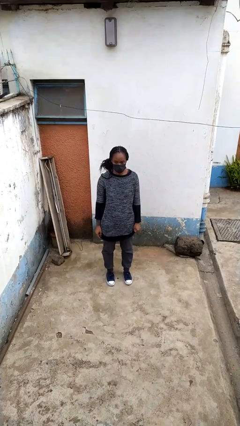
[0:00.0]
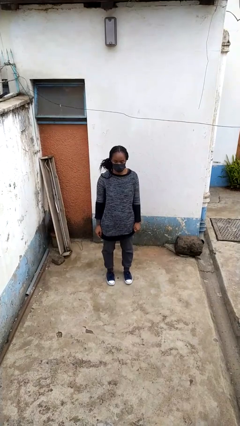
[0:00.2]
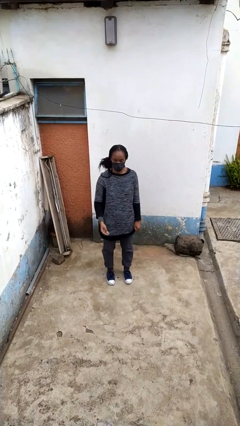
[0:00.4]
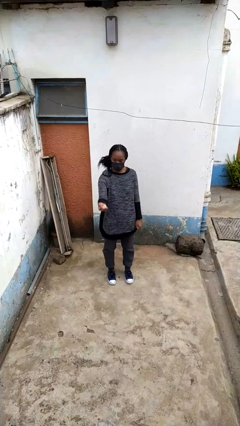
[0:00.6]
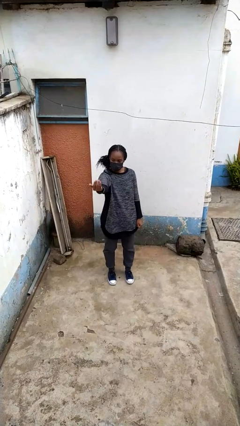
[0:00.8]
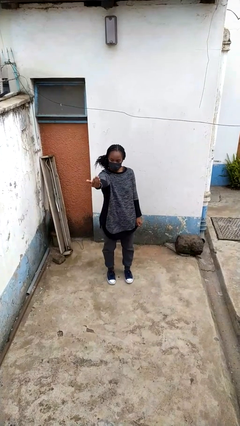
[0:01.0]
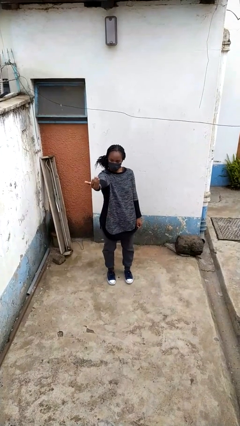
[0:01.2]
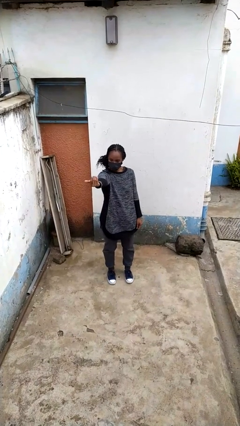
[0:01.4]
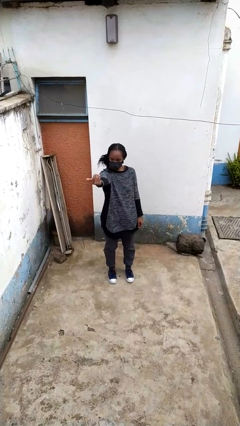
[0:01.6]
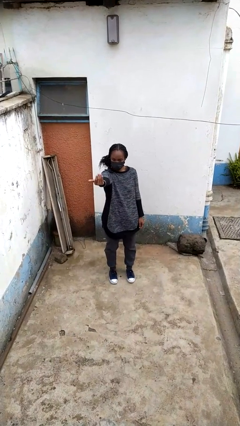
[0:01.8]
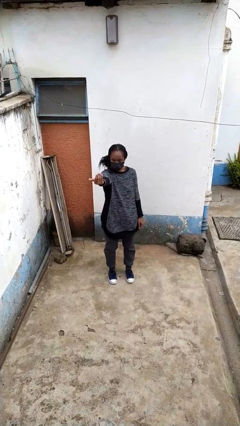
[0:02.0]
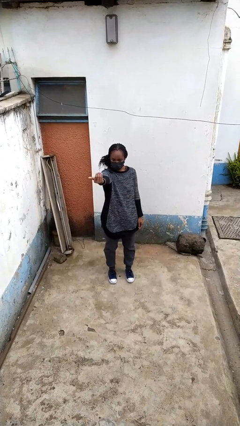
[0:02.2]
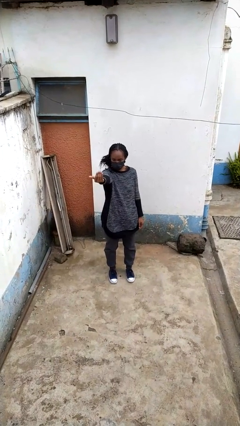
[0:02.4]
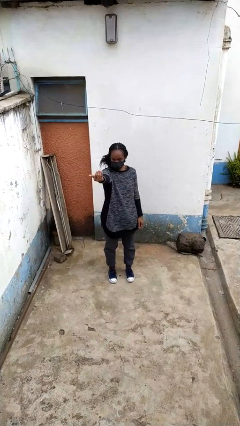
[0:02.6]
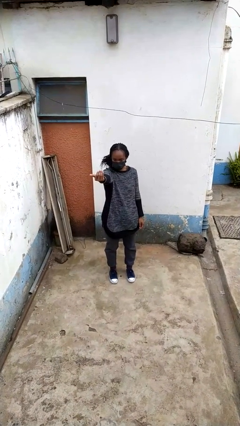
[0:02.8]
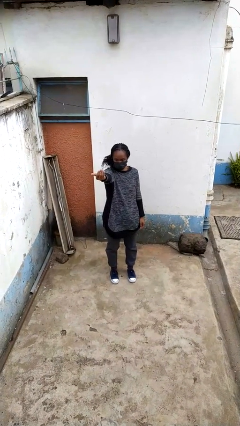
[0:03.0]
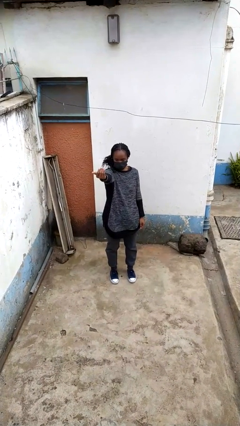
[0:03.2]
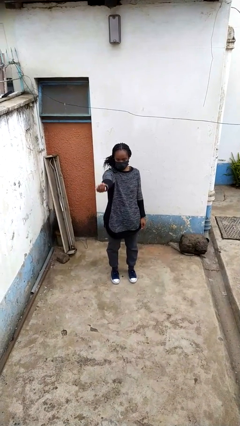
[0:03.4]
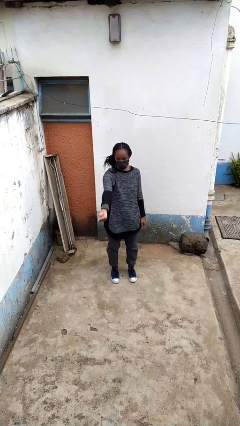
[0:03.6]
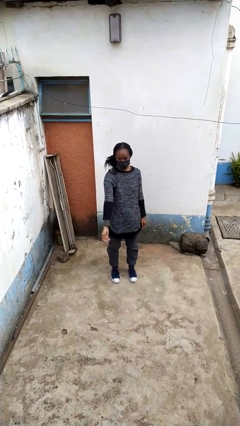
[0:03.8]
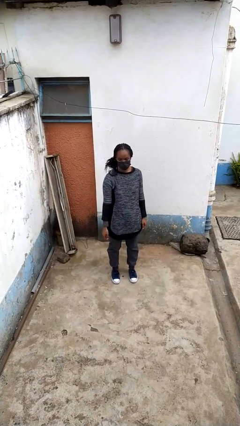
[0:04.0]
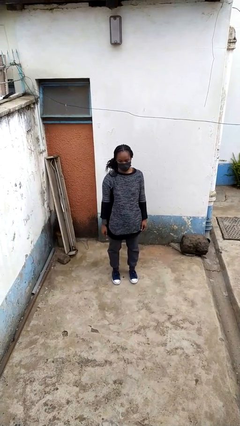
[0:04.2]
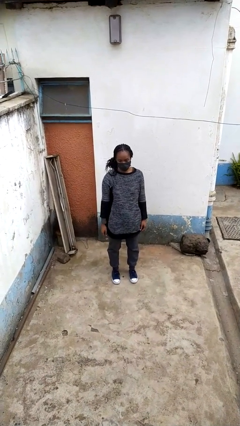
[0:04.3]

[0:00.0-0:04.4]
person gestures come here

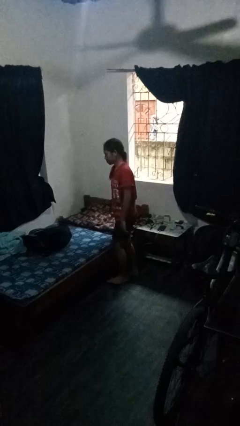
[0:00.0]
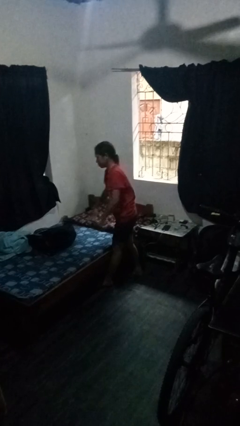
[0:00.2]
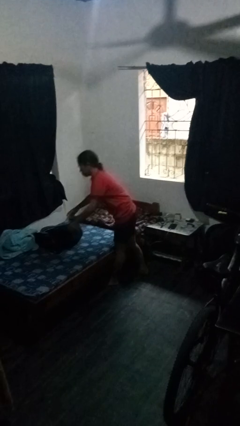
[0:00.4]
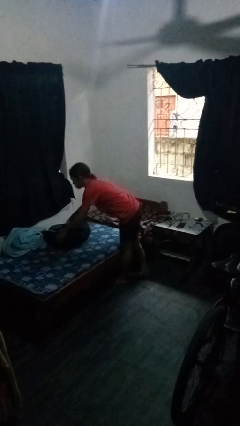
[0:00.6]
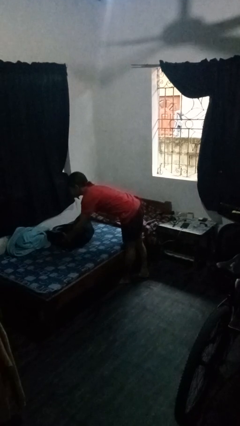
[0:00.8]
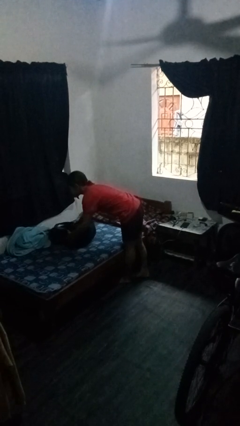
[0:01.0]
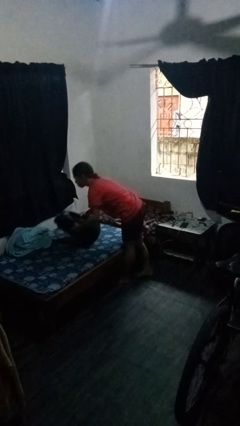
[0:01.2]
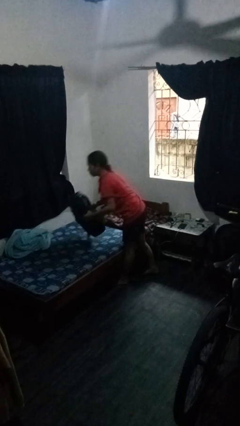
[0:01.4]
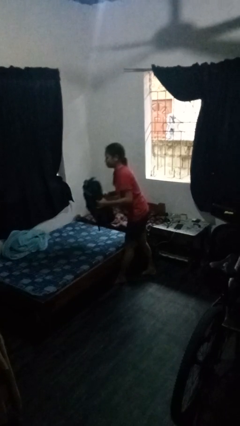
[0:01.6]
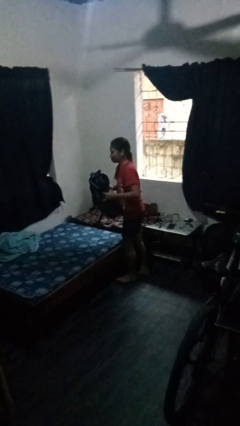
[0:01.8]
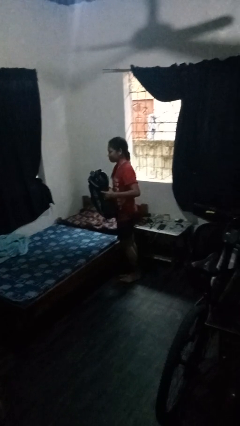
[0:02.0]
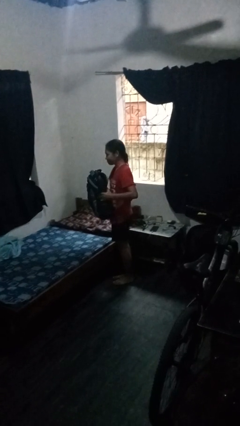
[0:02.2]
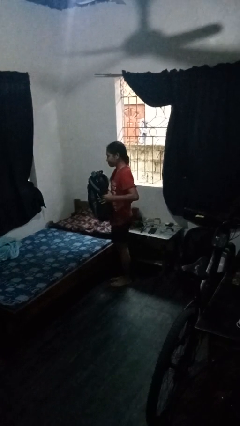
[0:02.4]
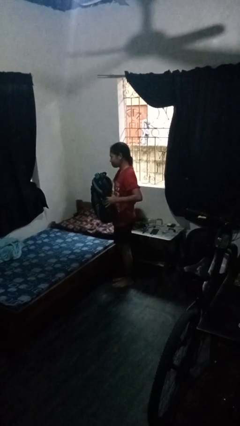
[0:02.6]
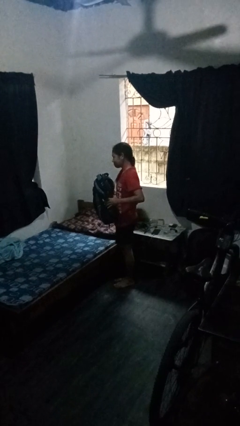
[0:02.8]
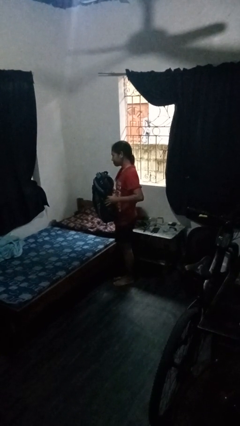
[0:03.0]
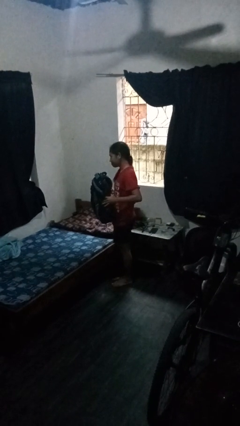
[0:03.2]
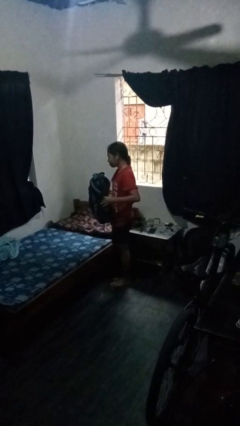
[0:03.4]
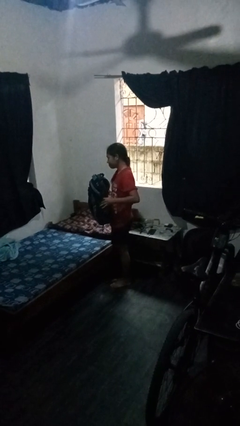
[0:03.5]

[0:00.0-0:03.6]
person picks up object from bed

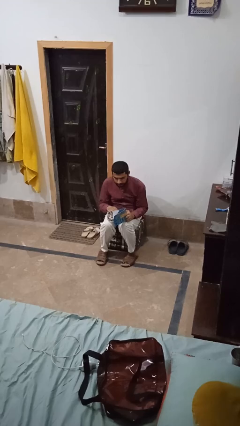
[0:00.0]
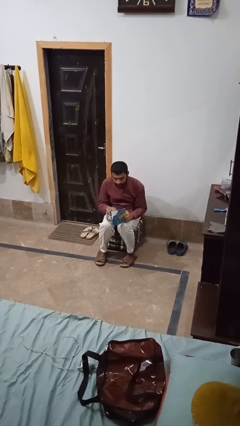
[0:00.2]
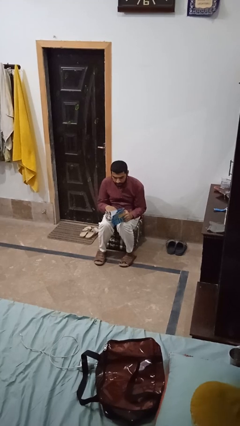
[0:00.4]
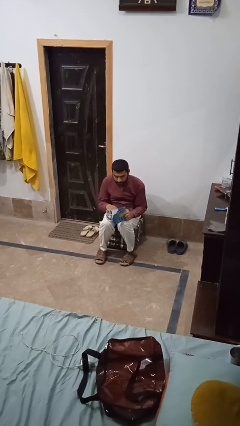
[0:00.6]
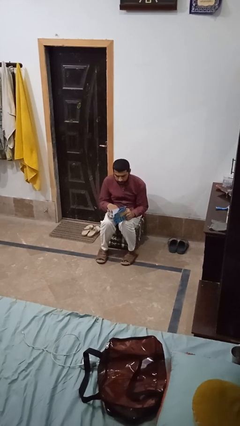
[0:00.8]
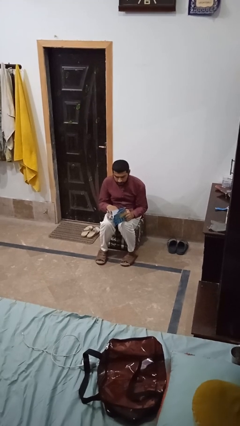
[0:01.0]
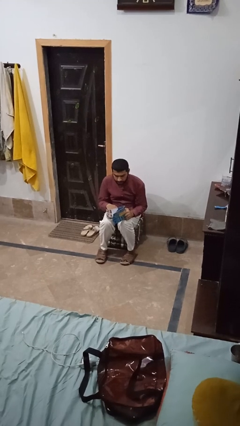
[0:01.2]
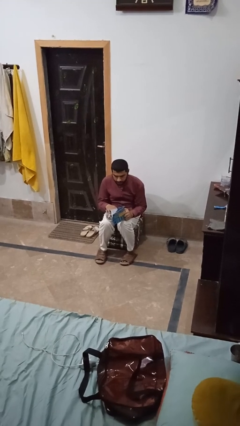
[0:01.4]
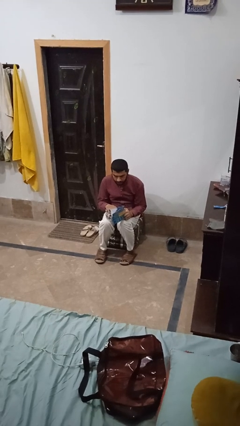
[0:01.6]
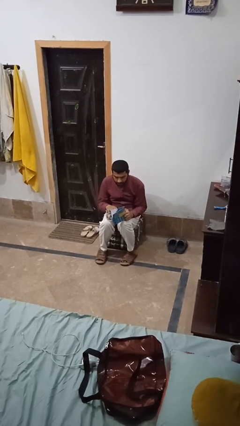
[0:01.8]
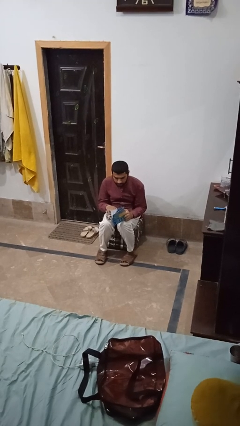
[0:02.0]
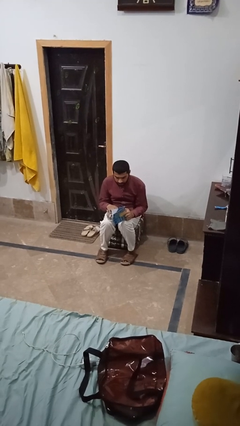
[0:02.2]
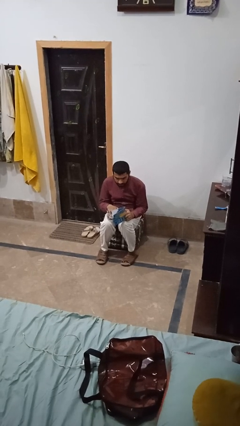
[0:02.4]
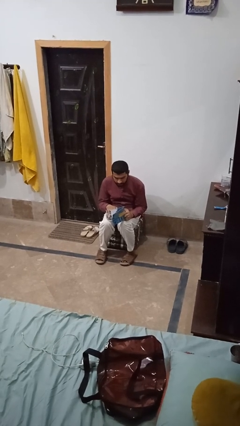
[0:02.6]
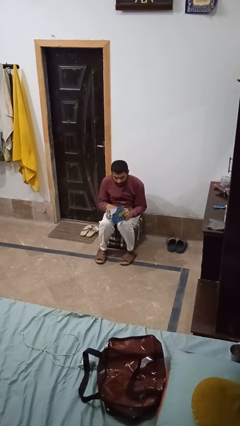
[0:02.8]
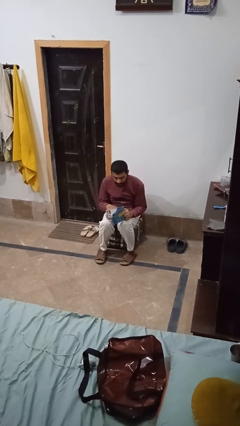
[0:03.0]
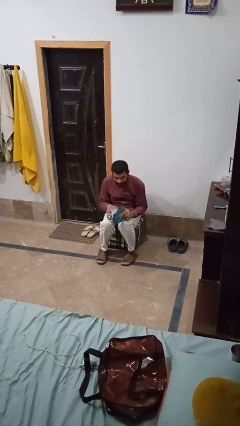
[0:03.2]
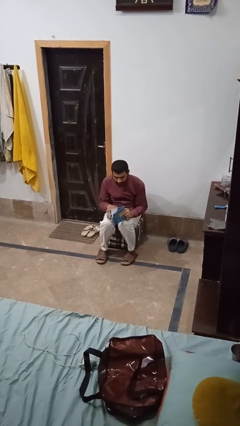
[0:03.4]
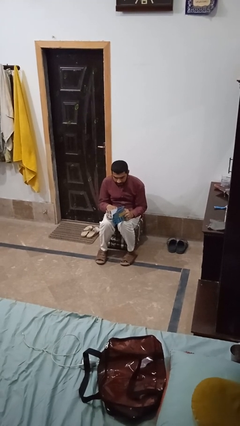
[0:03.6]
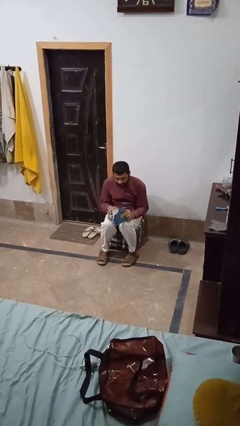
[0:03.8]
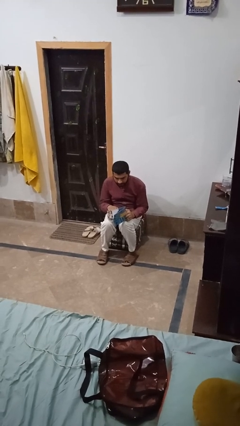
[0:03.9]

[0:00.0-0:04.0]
person searches jewelry box

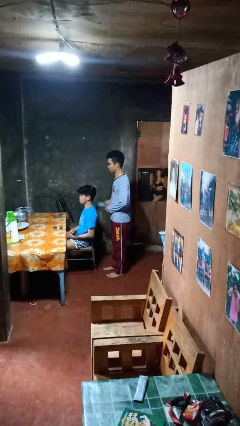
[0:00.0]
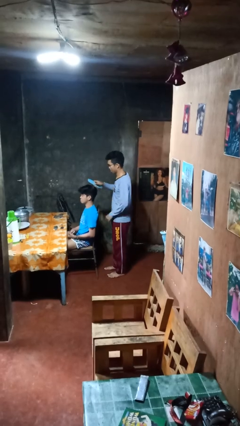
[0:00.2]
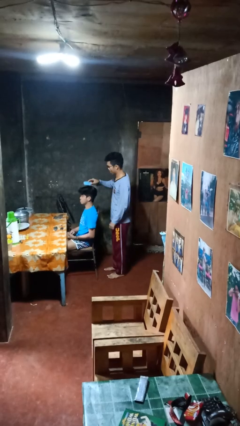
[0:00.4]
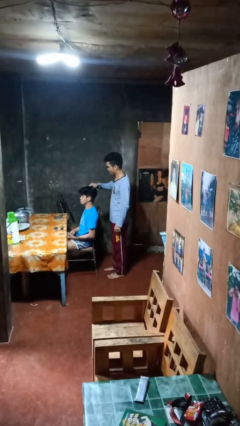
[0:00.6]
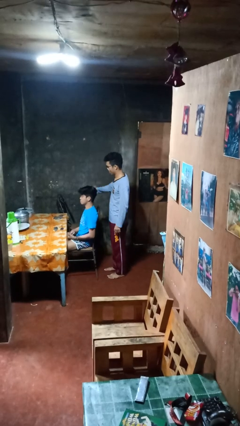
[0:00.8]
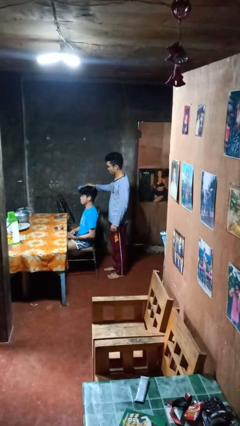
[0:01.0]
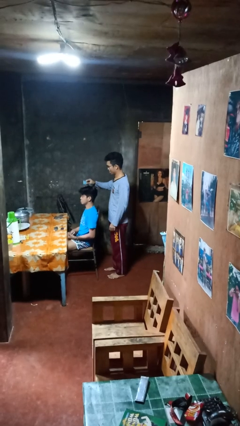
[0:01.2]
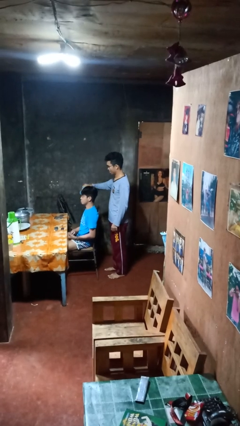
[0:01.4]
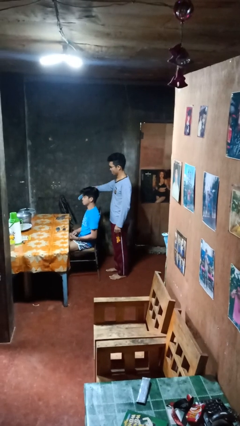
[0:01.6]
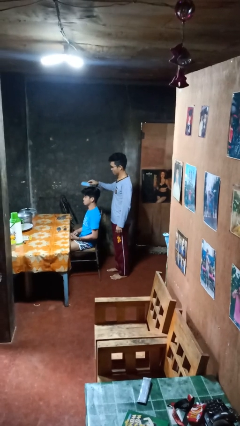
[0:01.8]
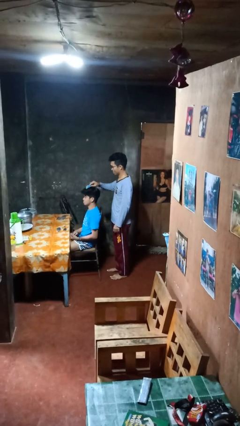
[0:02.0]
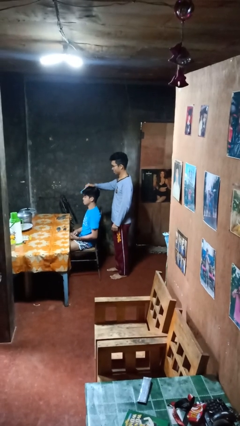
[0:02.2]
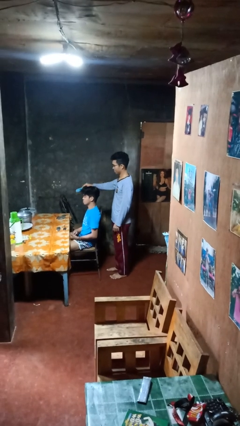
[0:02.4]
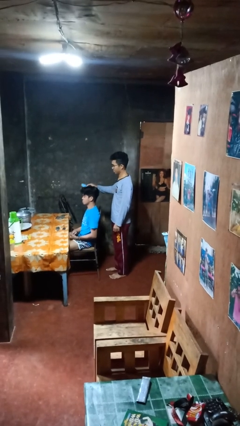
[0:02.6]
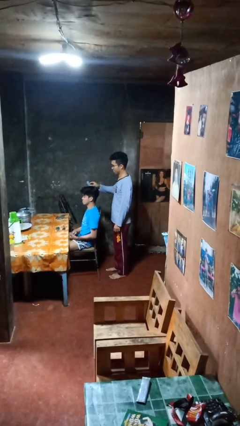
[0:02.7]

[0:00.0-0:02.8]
person brushes hair of person

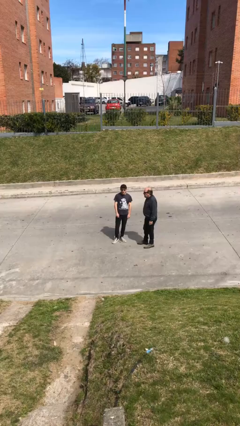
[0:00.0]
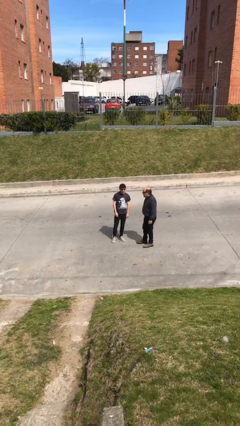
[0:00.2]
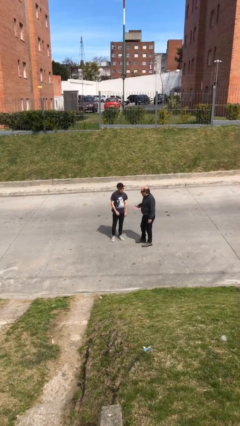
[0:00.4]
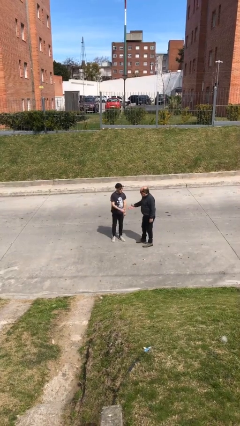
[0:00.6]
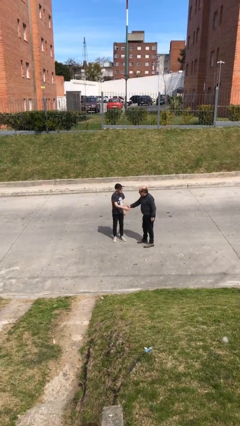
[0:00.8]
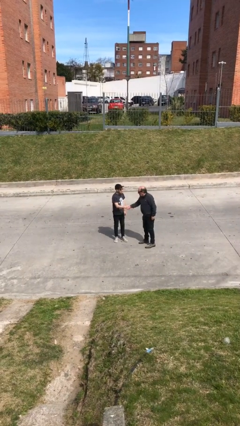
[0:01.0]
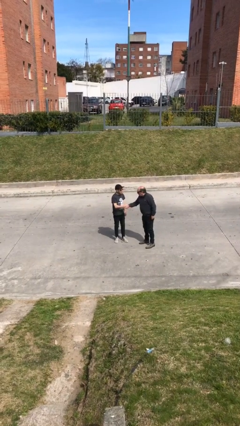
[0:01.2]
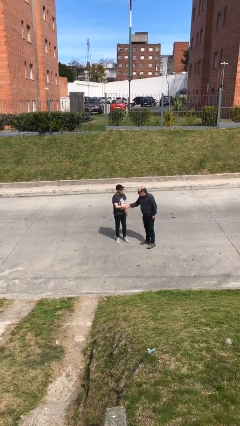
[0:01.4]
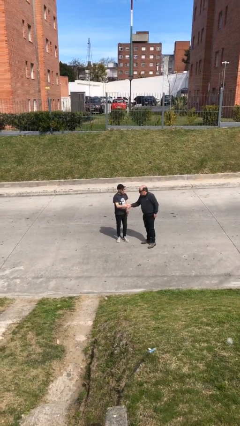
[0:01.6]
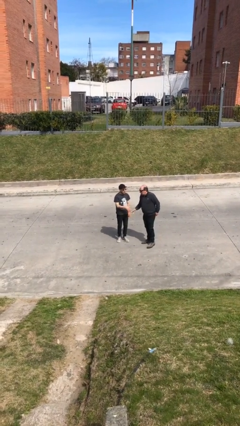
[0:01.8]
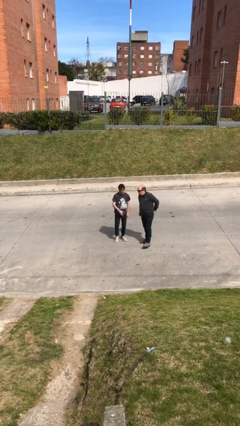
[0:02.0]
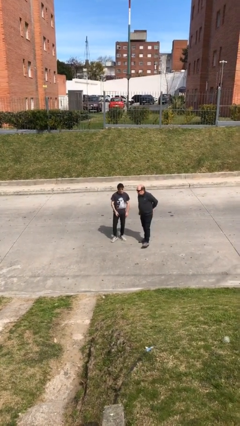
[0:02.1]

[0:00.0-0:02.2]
person shakes hand

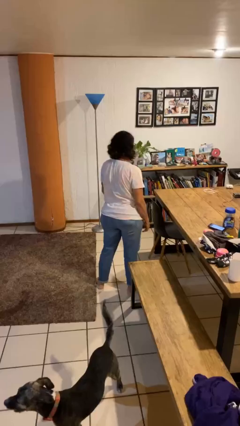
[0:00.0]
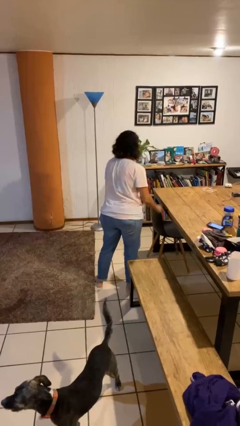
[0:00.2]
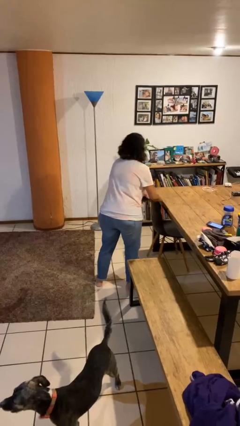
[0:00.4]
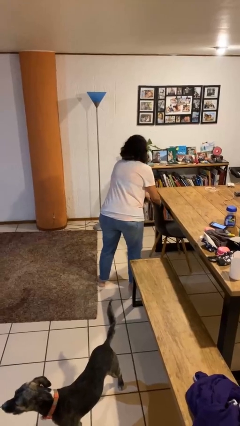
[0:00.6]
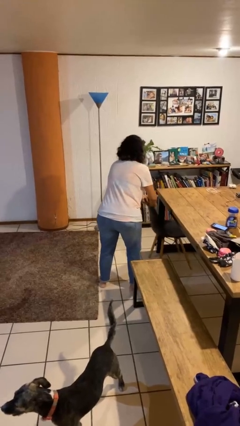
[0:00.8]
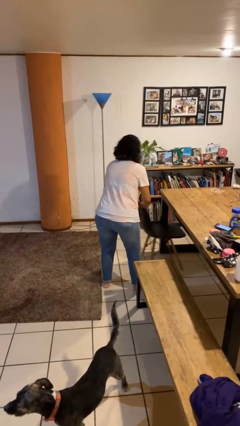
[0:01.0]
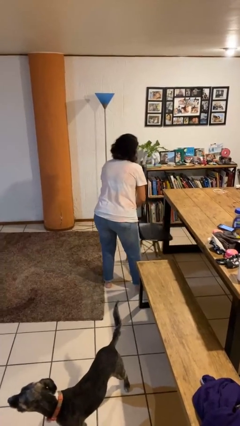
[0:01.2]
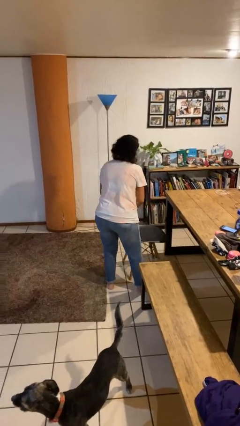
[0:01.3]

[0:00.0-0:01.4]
person pulls out chair
